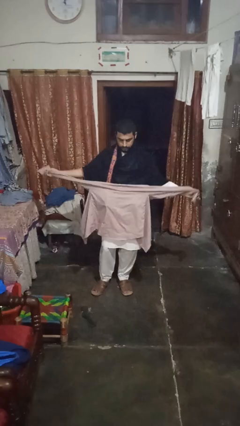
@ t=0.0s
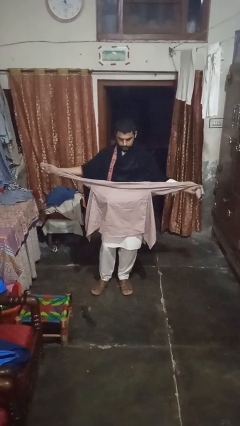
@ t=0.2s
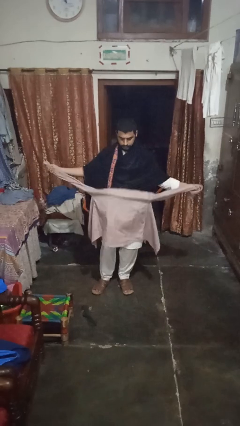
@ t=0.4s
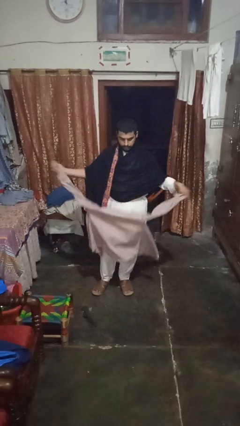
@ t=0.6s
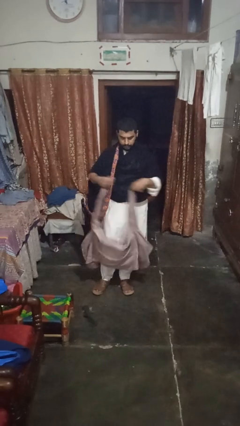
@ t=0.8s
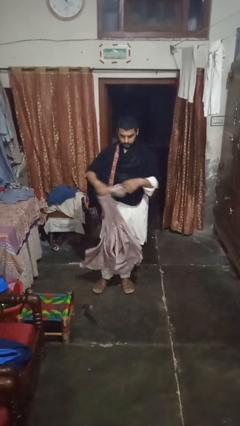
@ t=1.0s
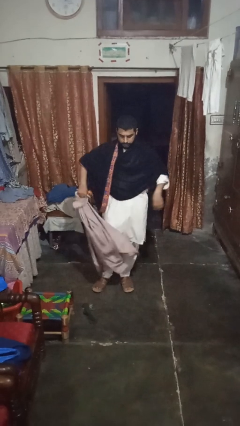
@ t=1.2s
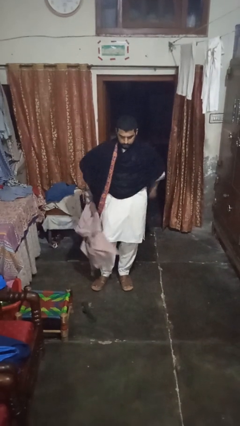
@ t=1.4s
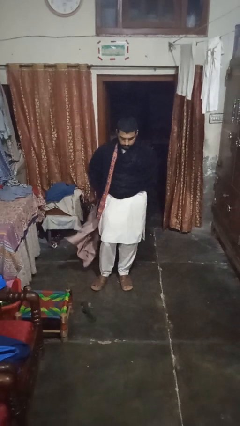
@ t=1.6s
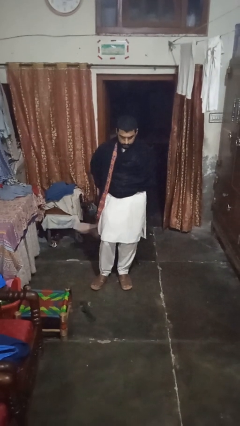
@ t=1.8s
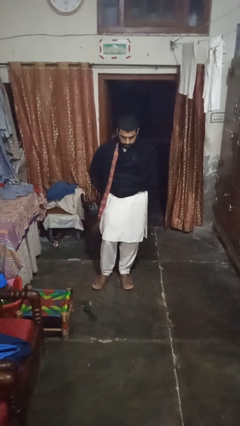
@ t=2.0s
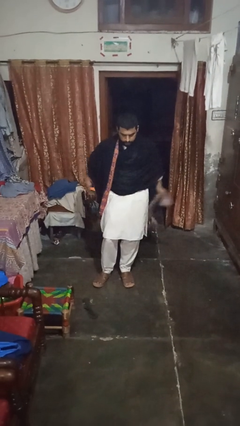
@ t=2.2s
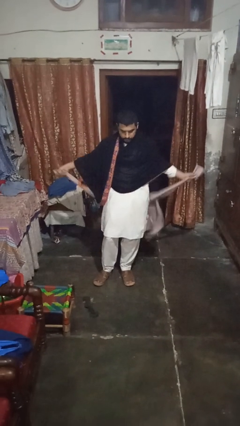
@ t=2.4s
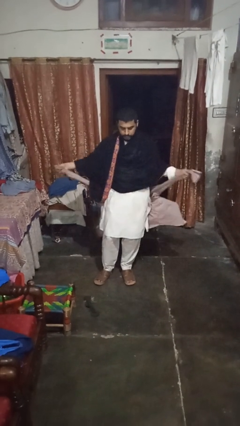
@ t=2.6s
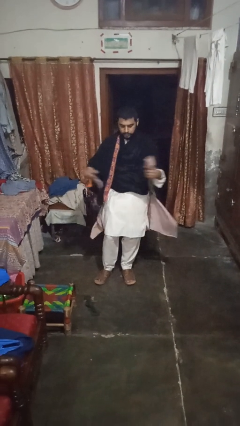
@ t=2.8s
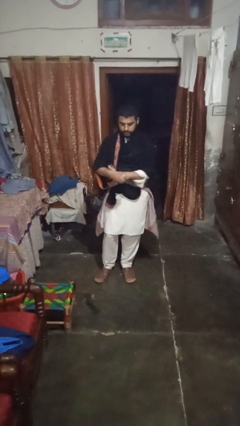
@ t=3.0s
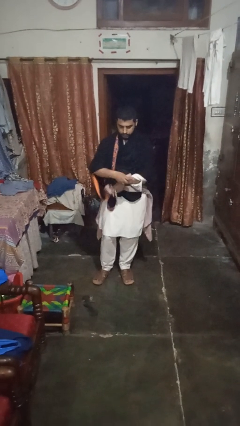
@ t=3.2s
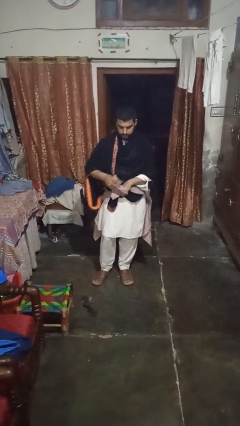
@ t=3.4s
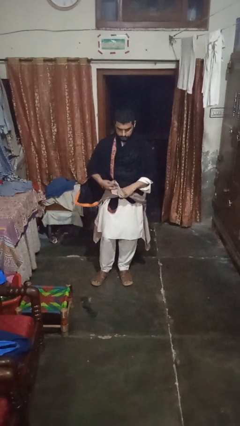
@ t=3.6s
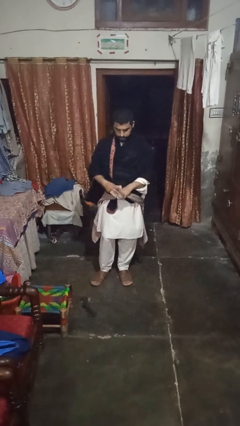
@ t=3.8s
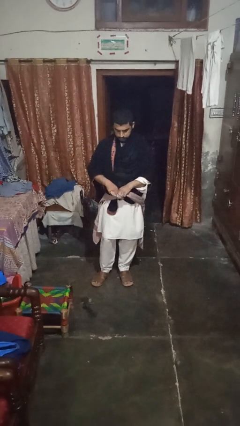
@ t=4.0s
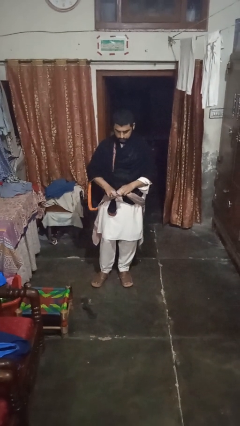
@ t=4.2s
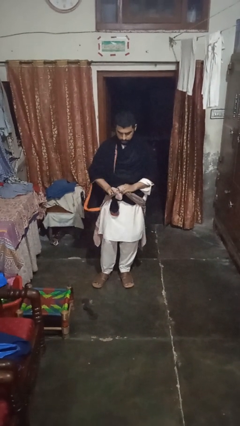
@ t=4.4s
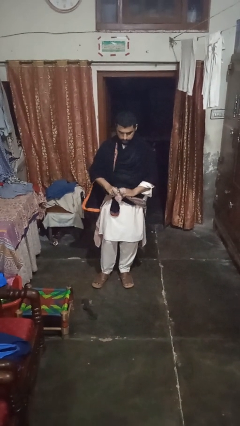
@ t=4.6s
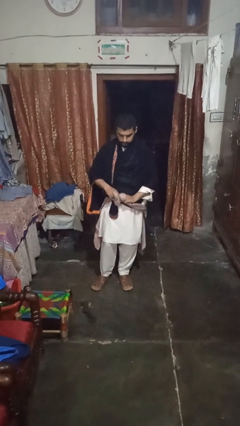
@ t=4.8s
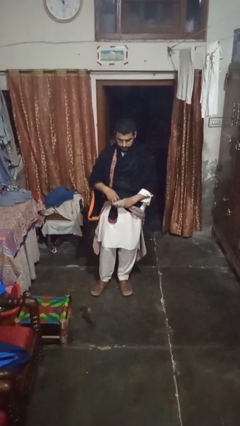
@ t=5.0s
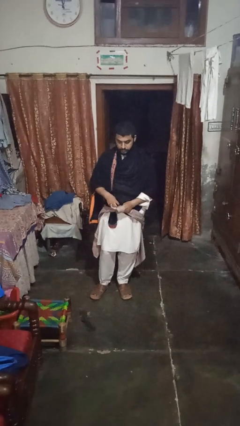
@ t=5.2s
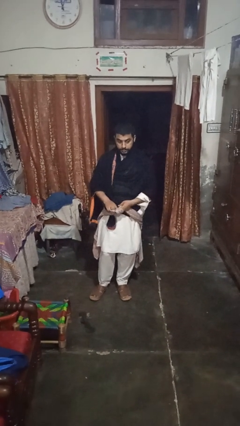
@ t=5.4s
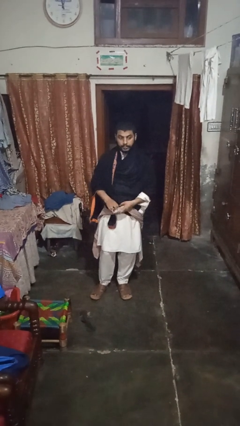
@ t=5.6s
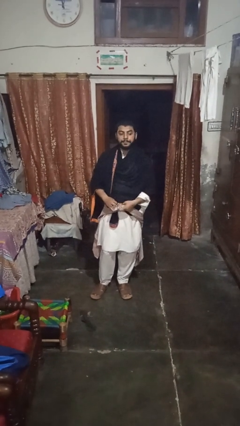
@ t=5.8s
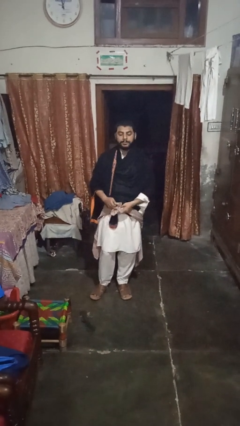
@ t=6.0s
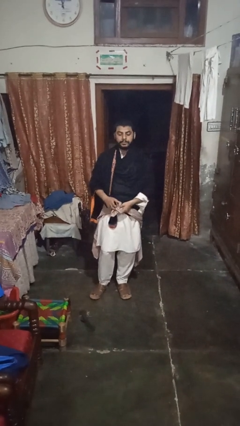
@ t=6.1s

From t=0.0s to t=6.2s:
person ties jacket around waist

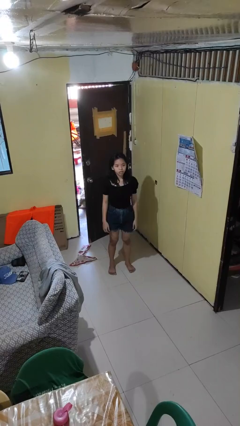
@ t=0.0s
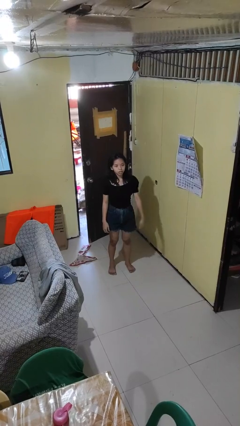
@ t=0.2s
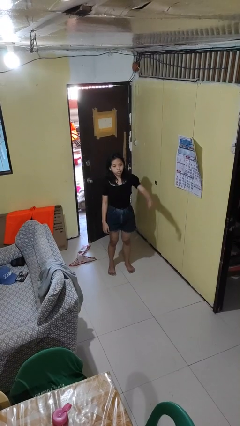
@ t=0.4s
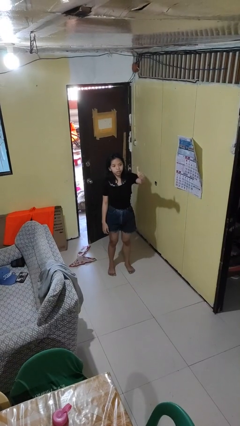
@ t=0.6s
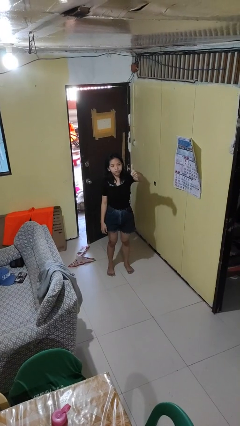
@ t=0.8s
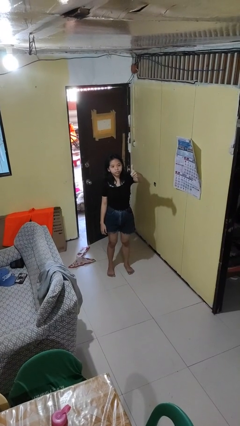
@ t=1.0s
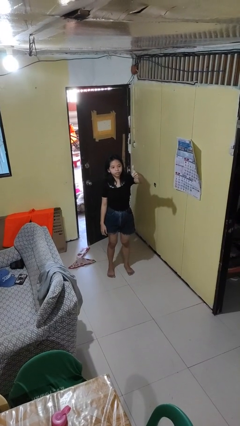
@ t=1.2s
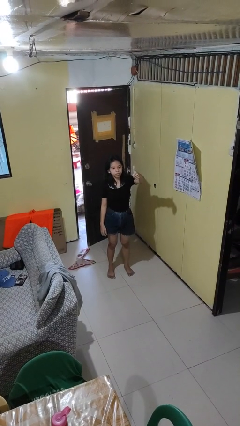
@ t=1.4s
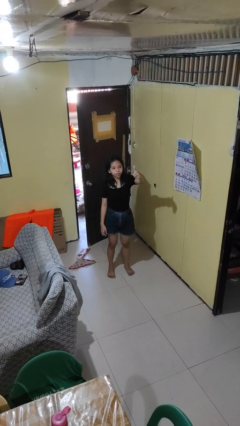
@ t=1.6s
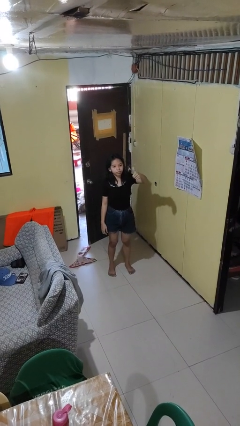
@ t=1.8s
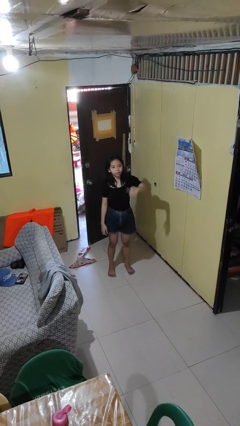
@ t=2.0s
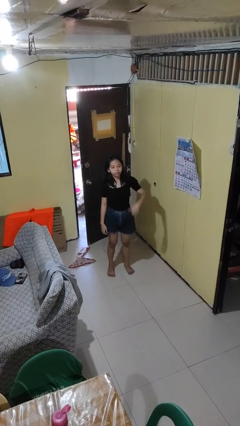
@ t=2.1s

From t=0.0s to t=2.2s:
person gestures thumbs up

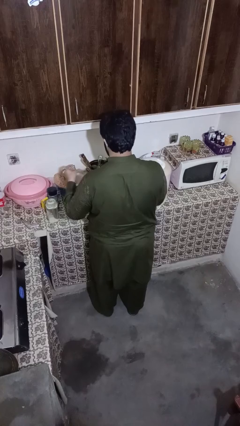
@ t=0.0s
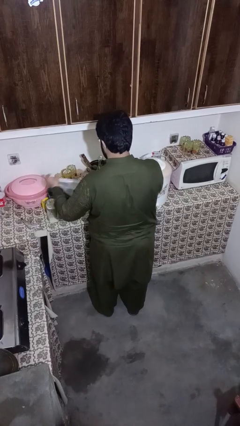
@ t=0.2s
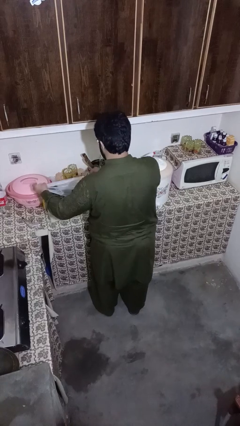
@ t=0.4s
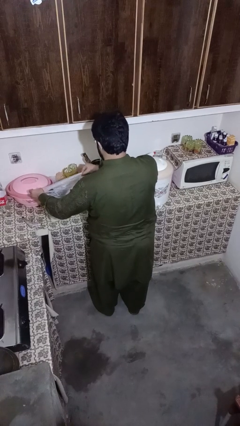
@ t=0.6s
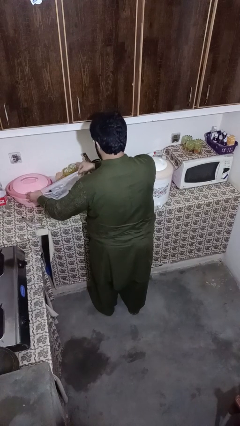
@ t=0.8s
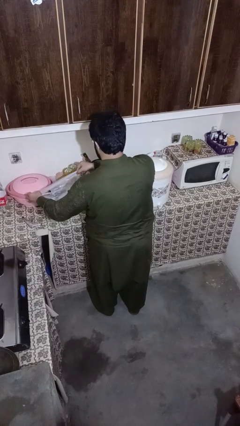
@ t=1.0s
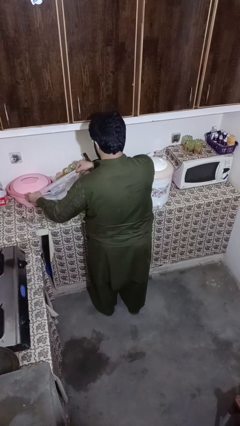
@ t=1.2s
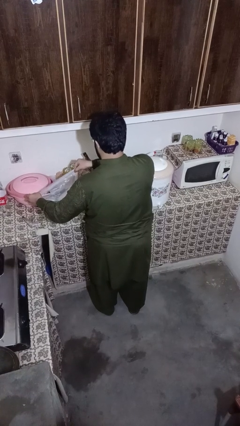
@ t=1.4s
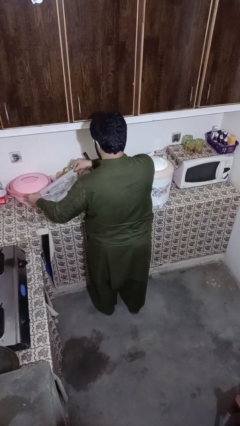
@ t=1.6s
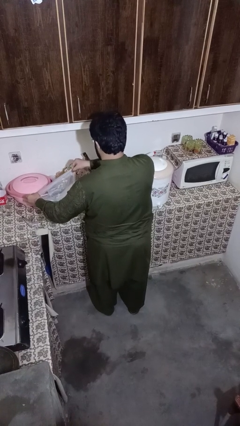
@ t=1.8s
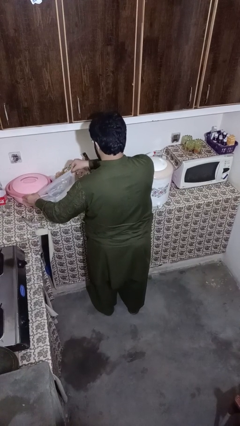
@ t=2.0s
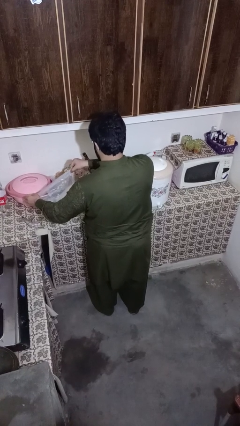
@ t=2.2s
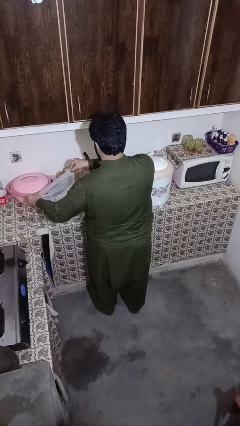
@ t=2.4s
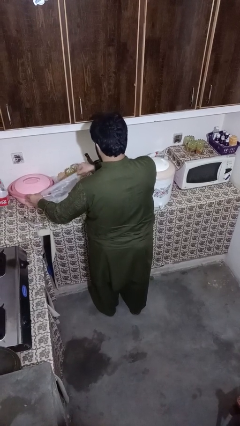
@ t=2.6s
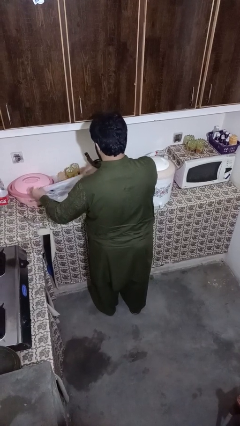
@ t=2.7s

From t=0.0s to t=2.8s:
person pours into bowl

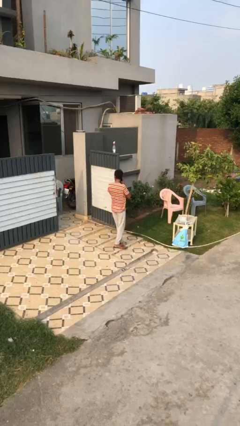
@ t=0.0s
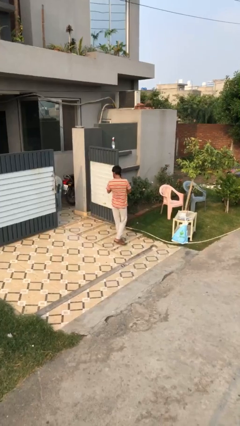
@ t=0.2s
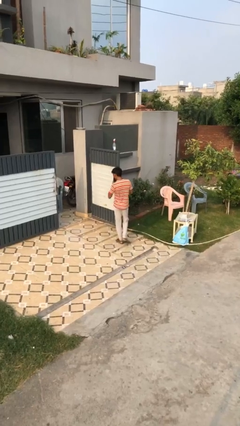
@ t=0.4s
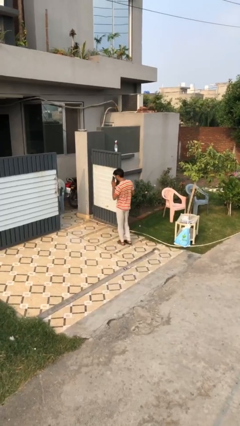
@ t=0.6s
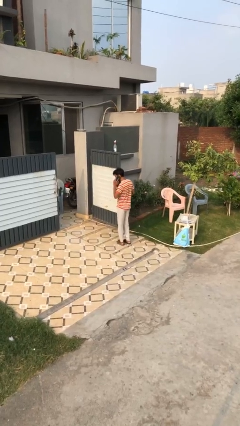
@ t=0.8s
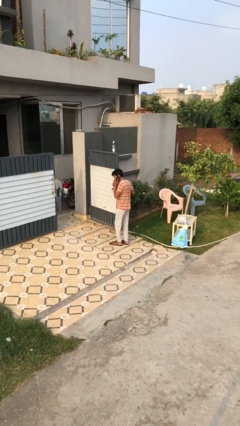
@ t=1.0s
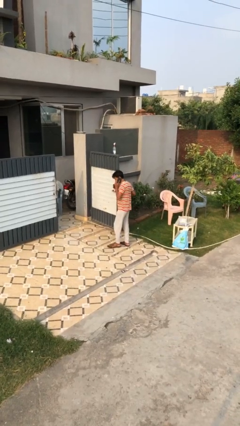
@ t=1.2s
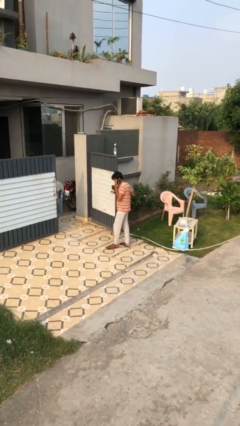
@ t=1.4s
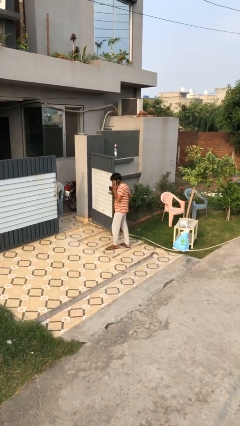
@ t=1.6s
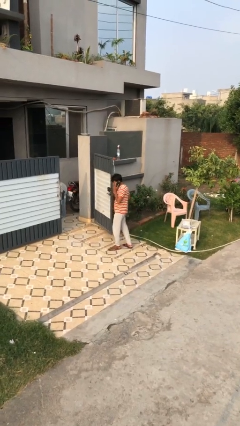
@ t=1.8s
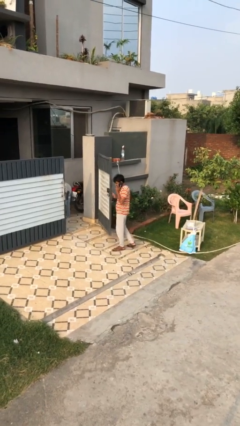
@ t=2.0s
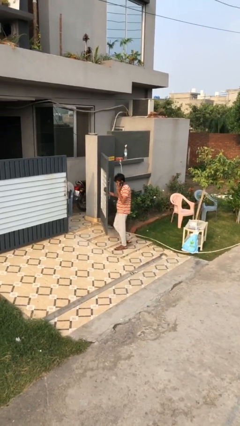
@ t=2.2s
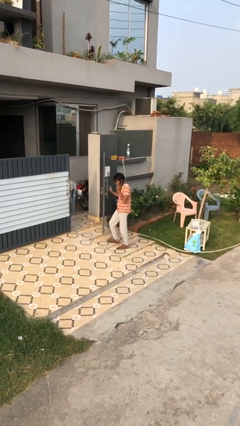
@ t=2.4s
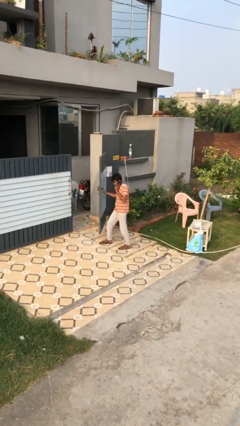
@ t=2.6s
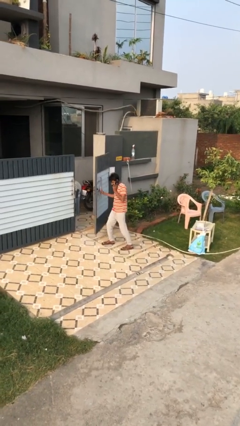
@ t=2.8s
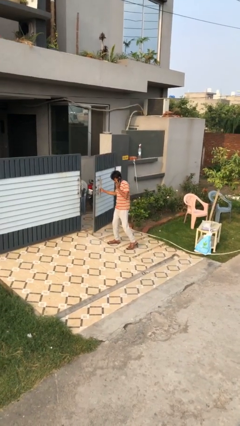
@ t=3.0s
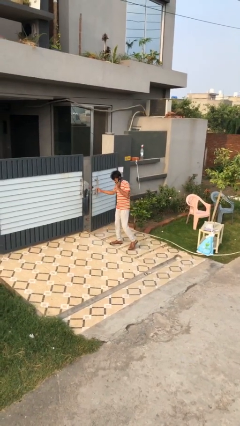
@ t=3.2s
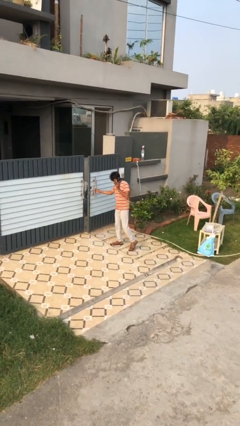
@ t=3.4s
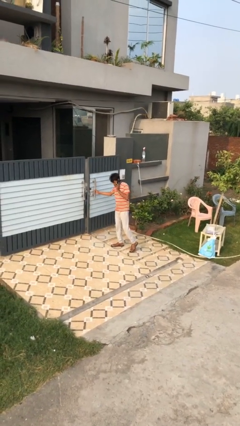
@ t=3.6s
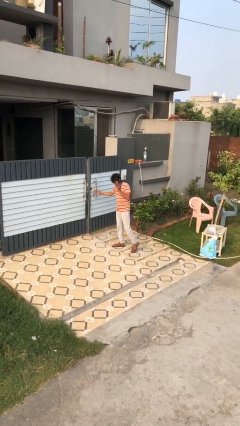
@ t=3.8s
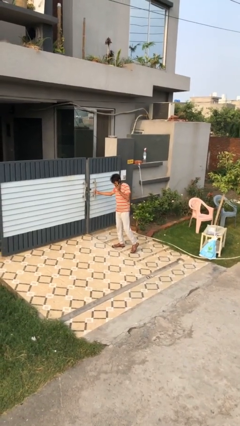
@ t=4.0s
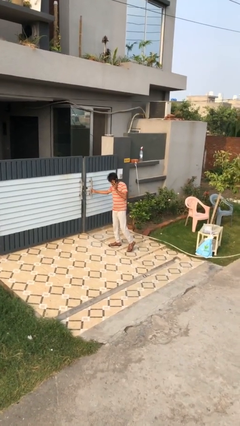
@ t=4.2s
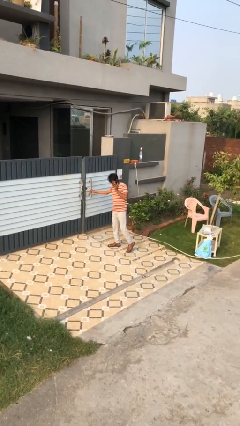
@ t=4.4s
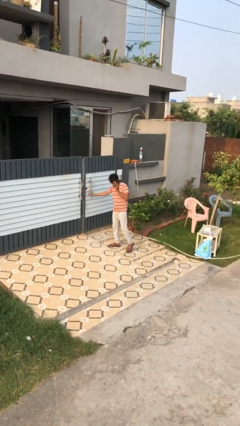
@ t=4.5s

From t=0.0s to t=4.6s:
person closes facility door

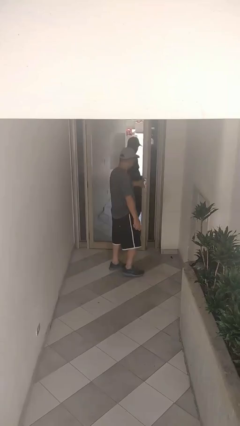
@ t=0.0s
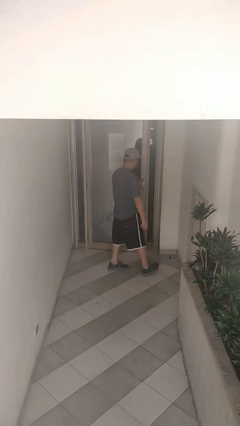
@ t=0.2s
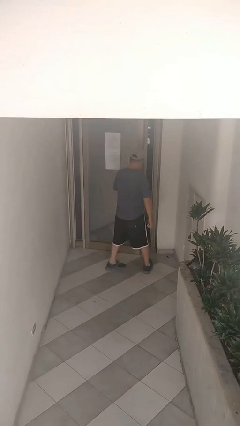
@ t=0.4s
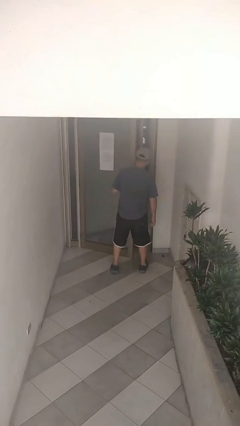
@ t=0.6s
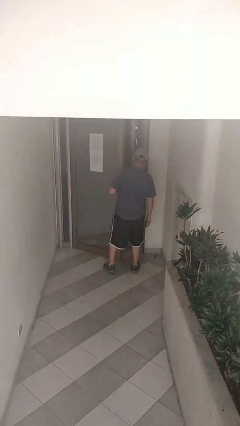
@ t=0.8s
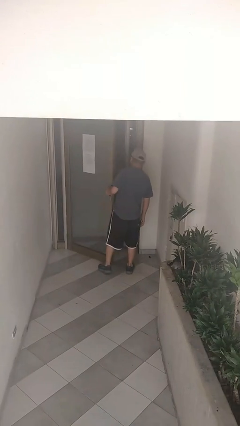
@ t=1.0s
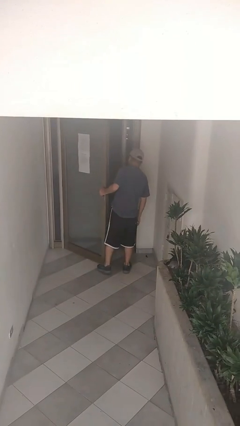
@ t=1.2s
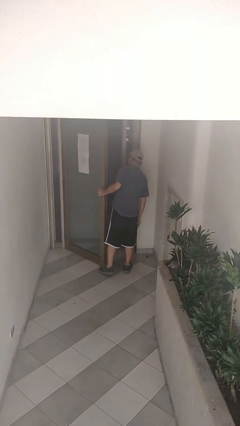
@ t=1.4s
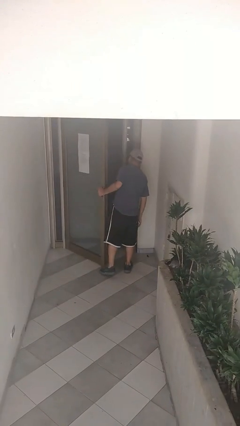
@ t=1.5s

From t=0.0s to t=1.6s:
person opens facility door
